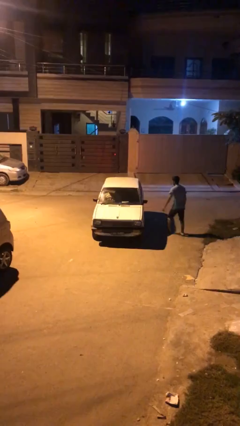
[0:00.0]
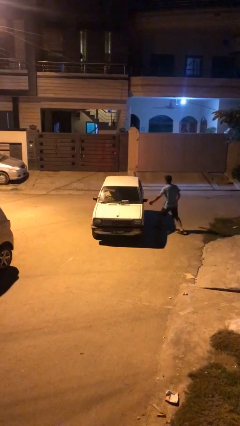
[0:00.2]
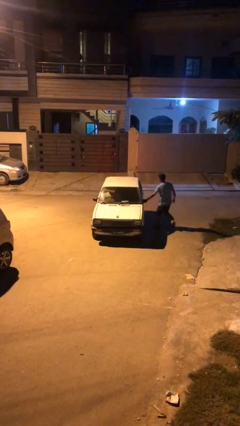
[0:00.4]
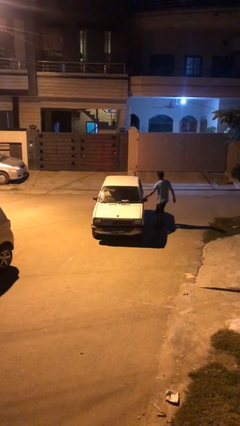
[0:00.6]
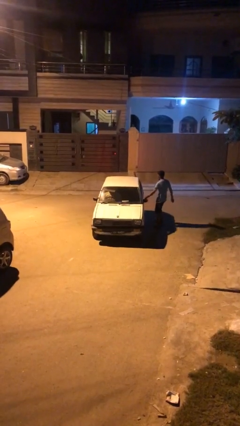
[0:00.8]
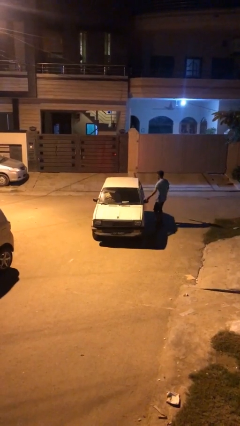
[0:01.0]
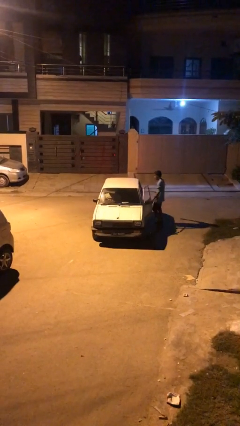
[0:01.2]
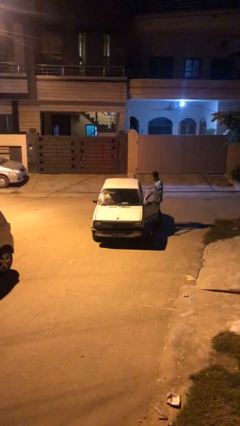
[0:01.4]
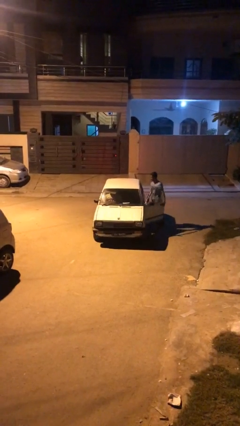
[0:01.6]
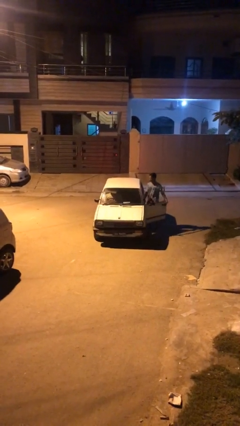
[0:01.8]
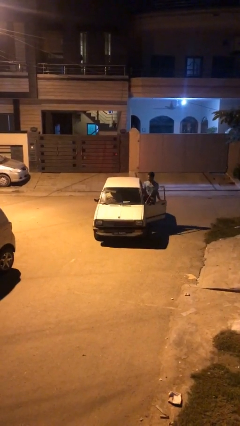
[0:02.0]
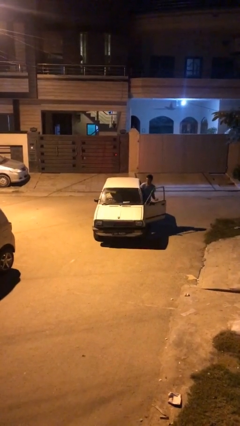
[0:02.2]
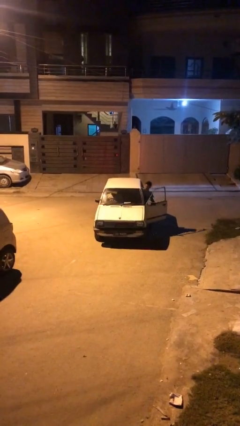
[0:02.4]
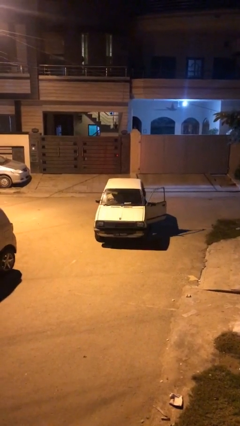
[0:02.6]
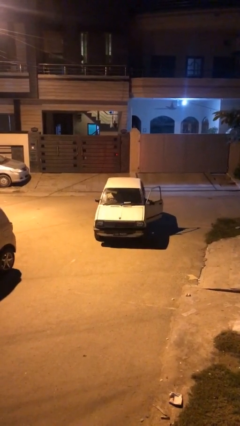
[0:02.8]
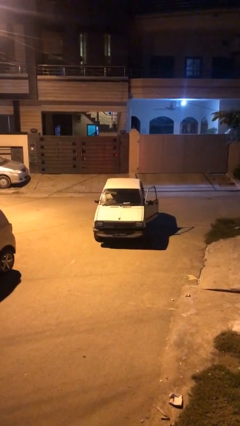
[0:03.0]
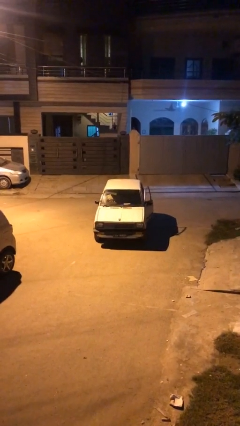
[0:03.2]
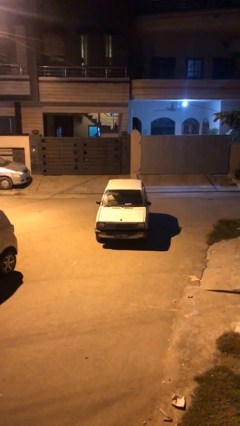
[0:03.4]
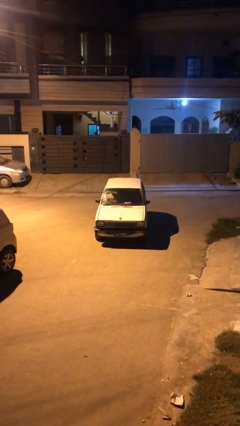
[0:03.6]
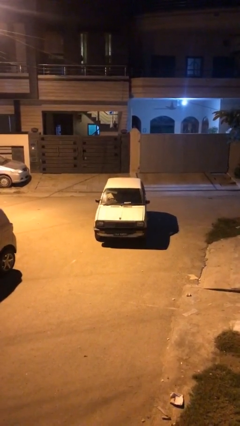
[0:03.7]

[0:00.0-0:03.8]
car picks up person

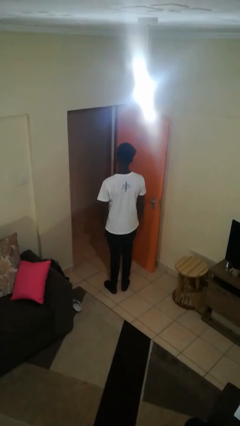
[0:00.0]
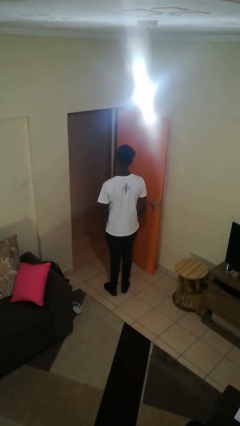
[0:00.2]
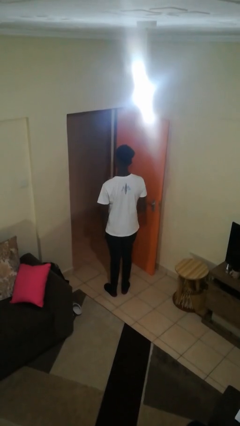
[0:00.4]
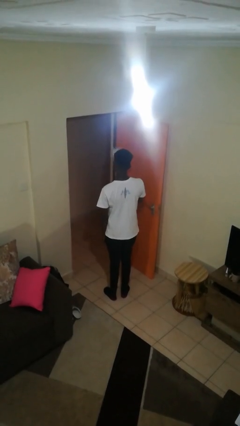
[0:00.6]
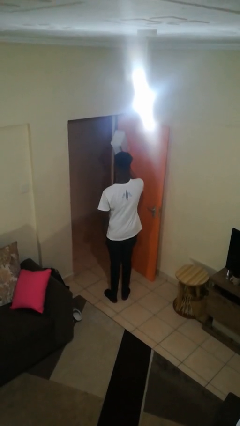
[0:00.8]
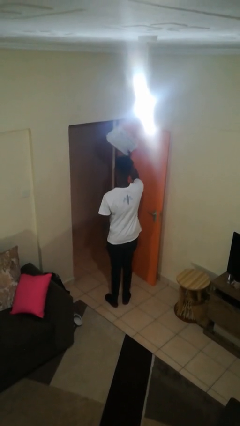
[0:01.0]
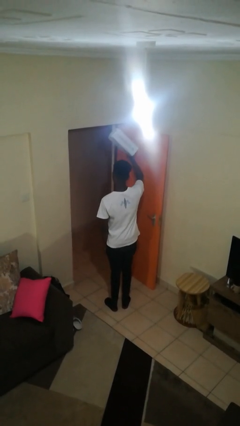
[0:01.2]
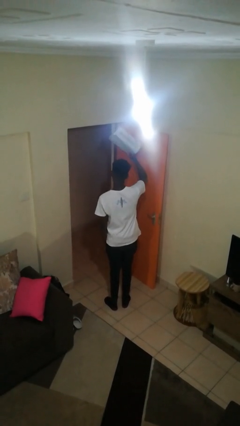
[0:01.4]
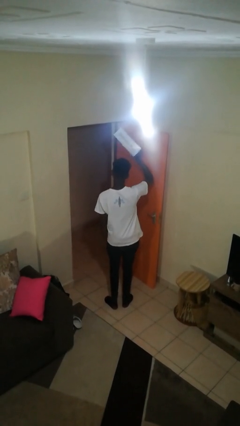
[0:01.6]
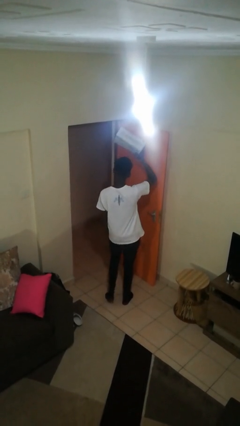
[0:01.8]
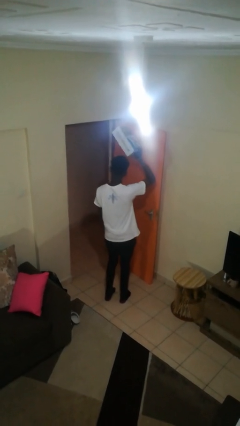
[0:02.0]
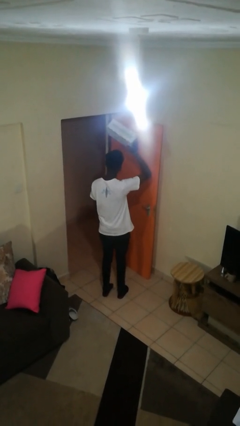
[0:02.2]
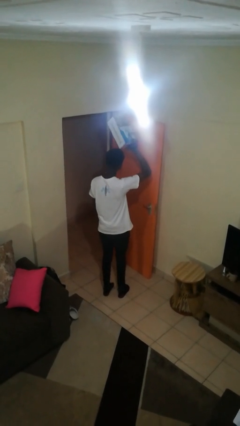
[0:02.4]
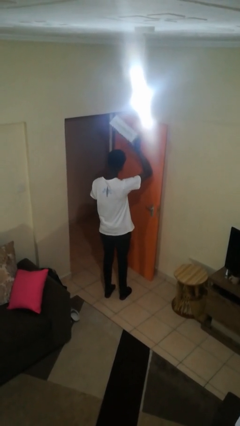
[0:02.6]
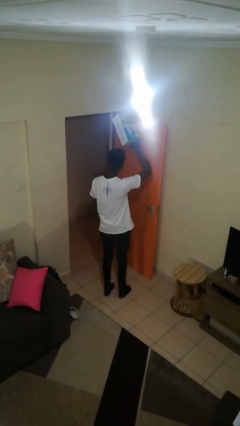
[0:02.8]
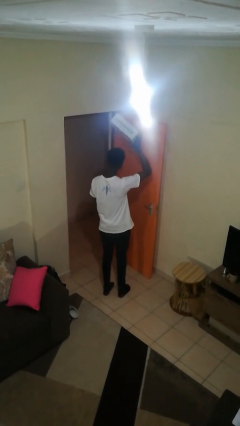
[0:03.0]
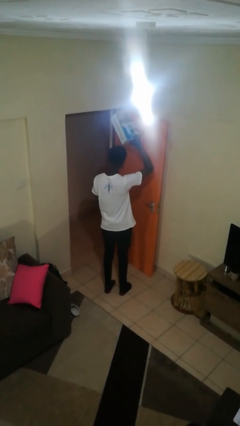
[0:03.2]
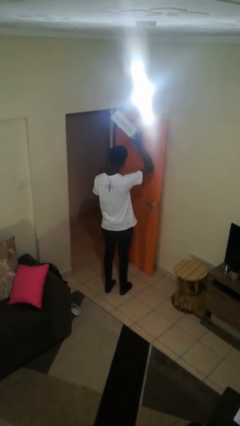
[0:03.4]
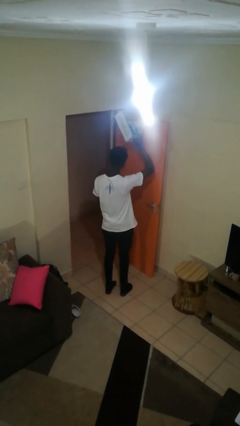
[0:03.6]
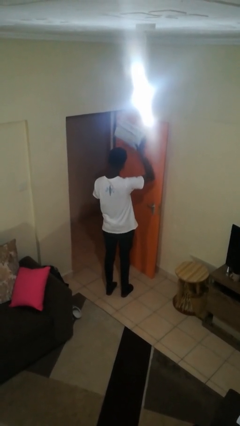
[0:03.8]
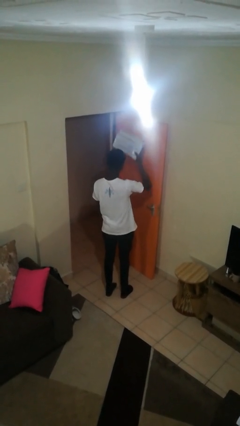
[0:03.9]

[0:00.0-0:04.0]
person holds object above head

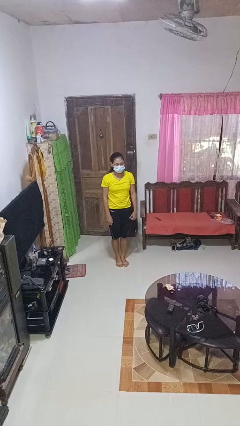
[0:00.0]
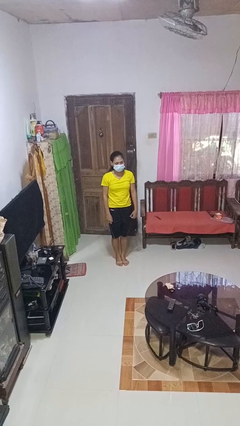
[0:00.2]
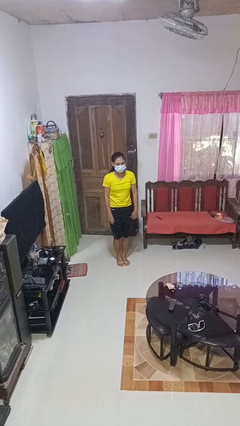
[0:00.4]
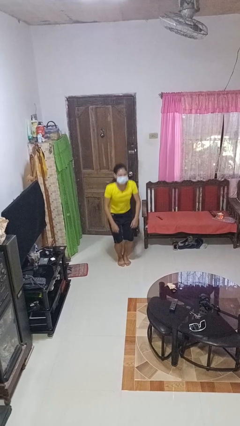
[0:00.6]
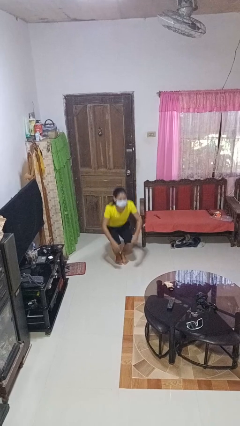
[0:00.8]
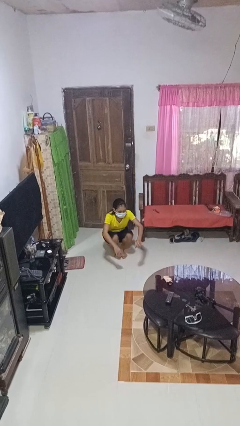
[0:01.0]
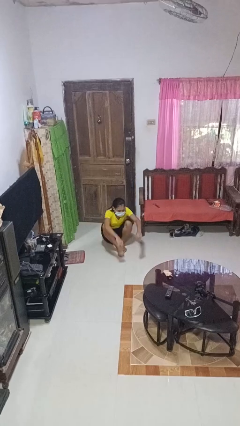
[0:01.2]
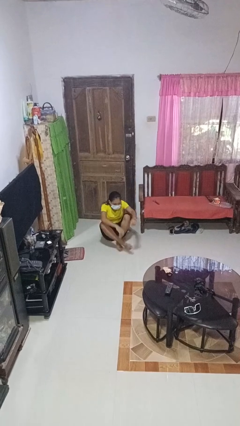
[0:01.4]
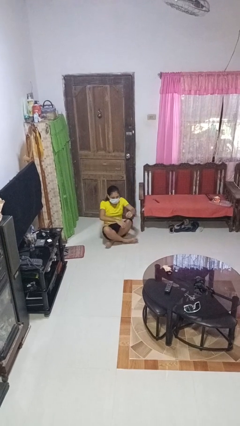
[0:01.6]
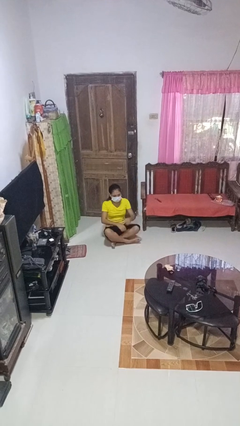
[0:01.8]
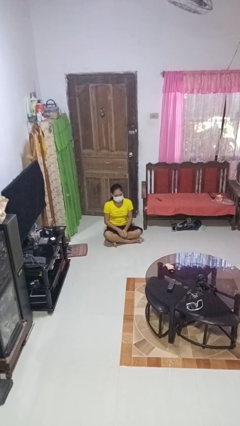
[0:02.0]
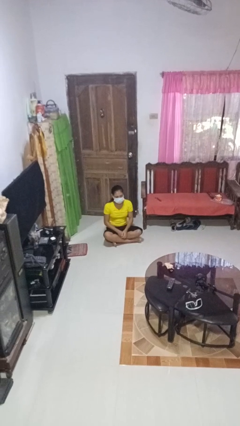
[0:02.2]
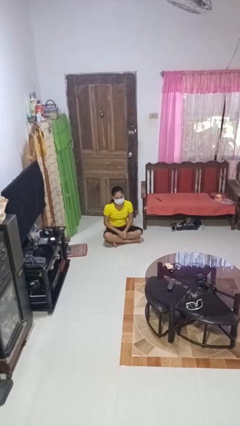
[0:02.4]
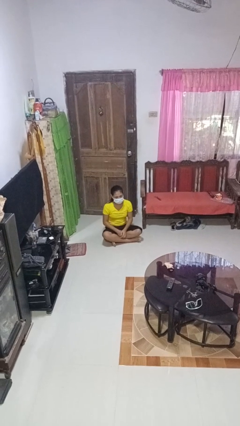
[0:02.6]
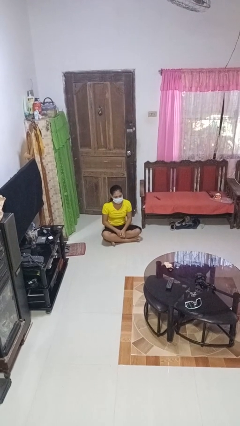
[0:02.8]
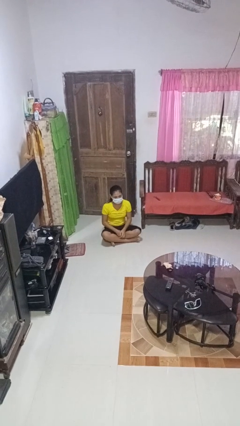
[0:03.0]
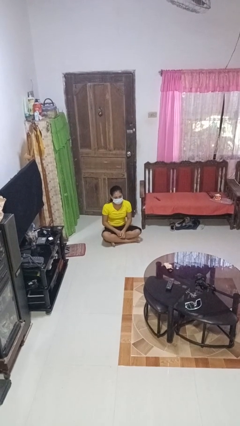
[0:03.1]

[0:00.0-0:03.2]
person sits crisscross

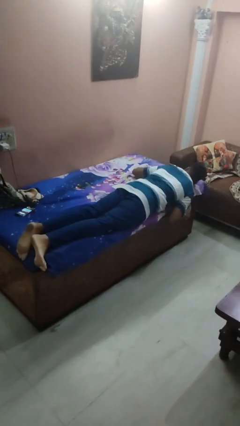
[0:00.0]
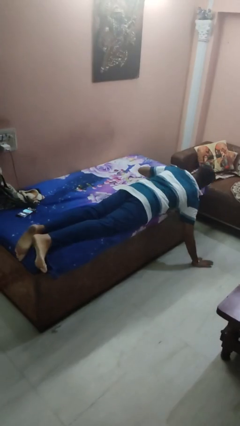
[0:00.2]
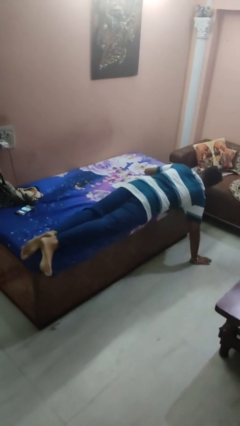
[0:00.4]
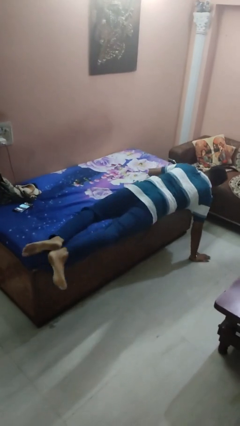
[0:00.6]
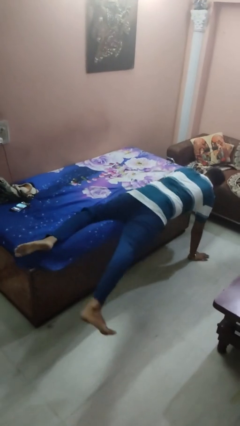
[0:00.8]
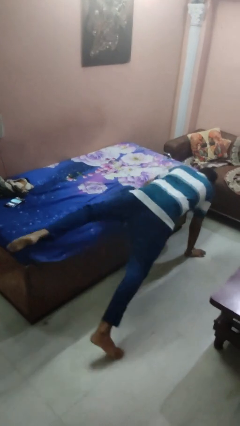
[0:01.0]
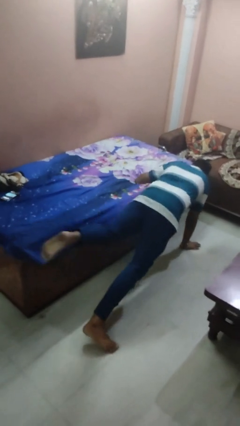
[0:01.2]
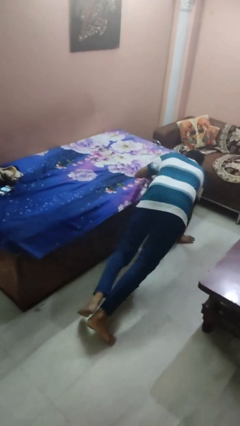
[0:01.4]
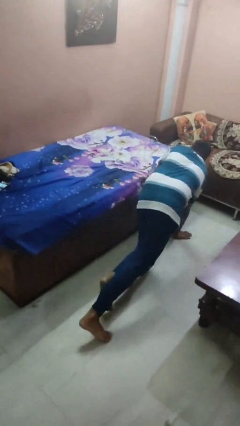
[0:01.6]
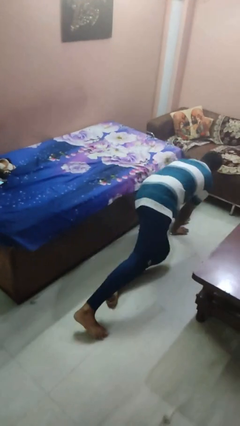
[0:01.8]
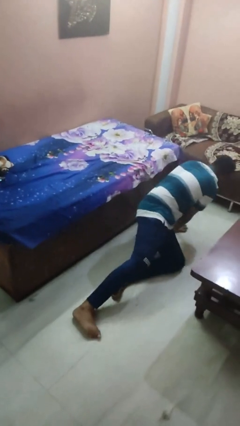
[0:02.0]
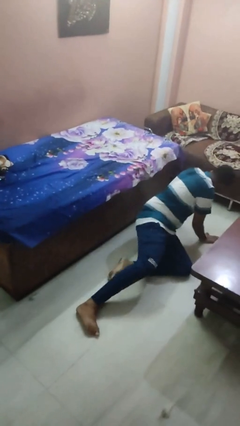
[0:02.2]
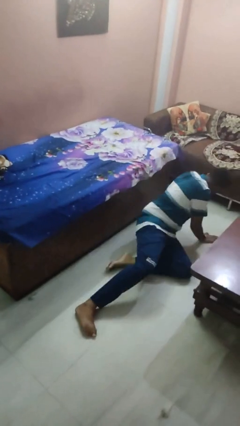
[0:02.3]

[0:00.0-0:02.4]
person falls from bed

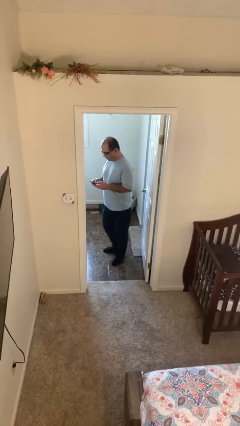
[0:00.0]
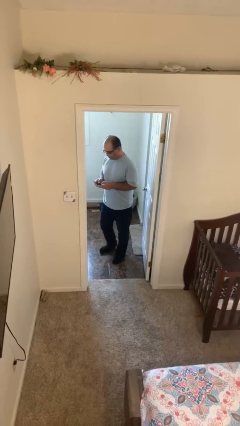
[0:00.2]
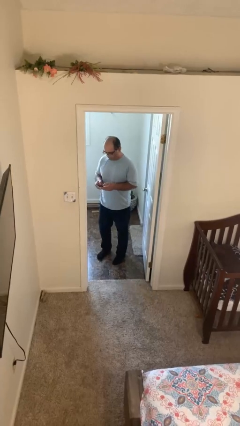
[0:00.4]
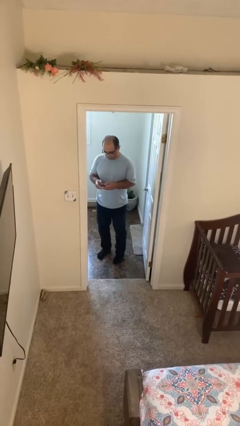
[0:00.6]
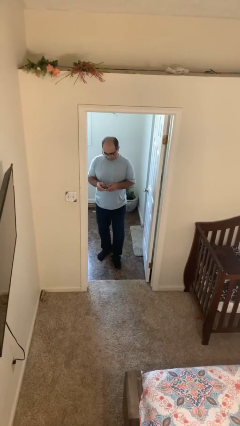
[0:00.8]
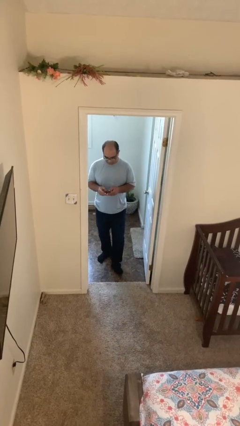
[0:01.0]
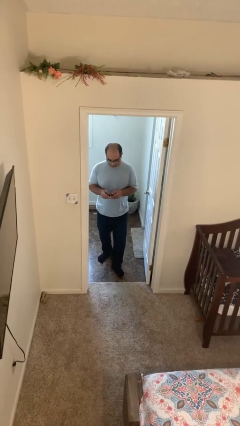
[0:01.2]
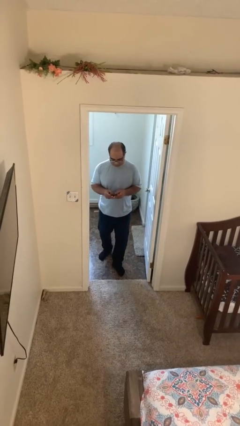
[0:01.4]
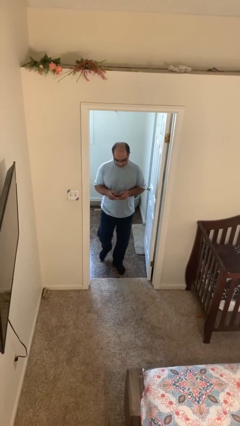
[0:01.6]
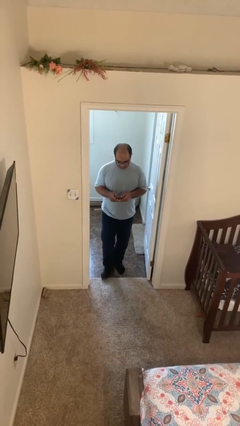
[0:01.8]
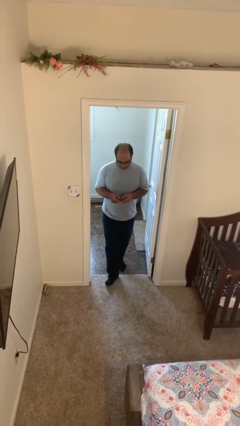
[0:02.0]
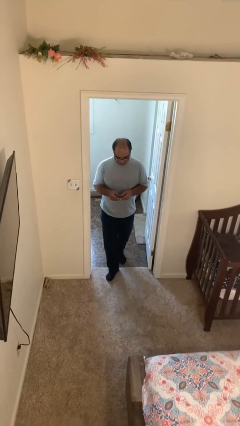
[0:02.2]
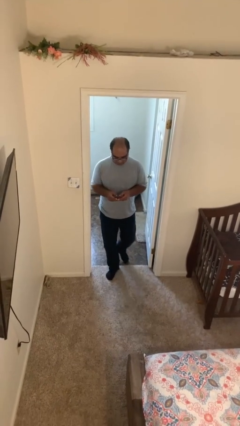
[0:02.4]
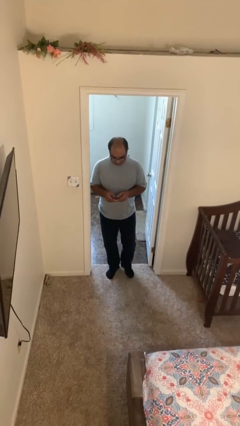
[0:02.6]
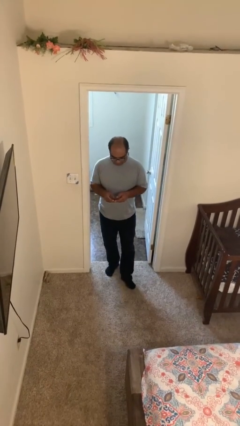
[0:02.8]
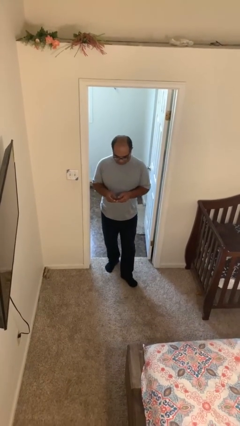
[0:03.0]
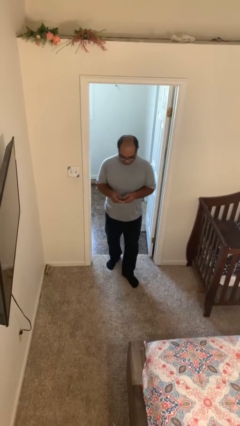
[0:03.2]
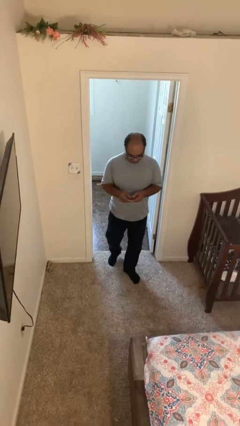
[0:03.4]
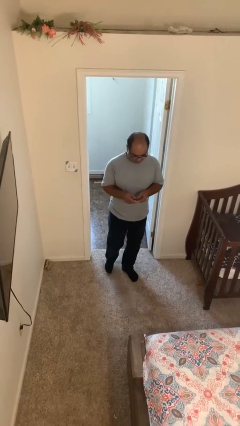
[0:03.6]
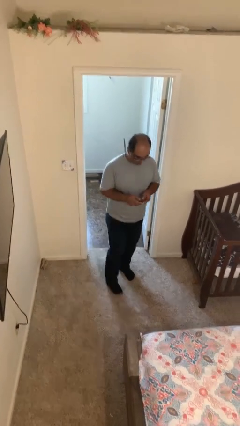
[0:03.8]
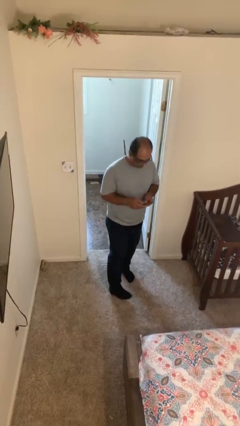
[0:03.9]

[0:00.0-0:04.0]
person enters scene through structure
